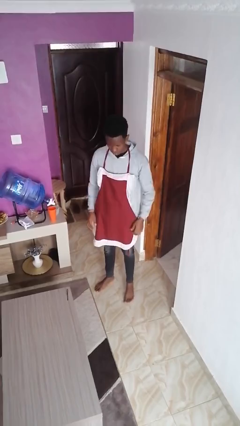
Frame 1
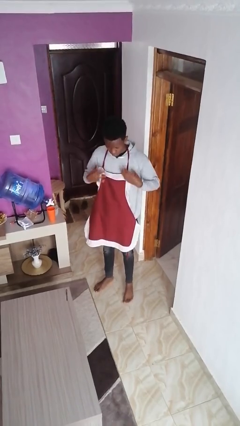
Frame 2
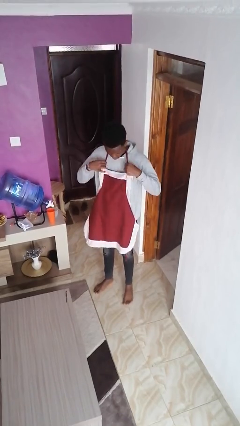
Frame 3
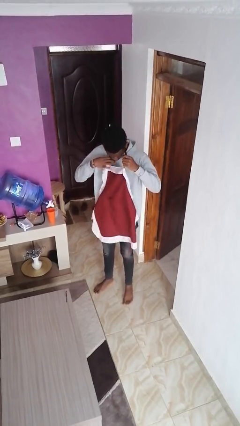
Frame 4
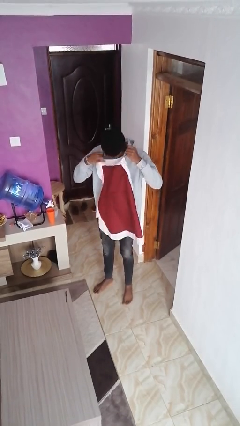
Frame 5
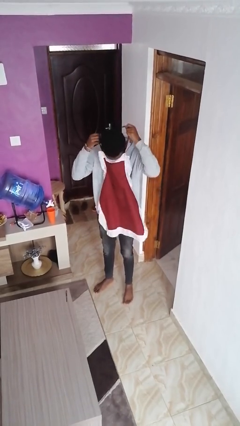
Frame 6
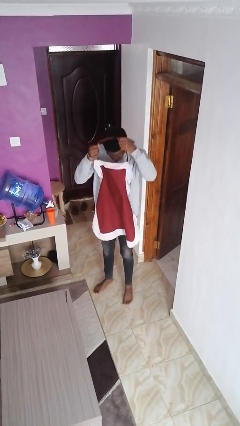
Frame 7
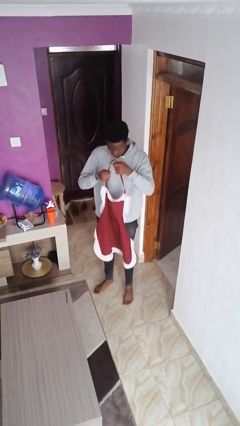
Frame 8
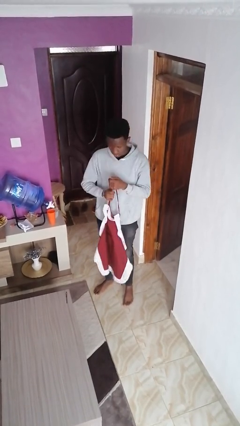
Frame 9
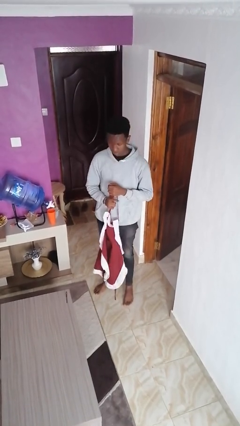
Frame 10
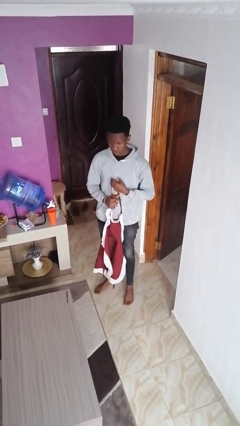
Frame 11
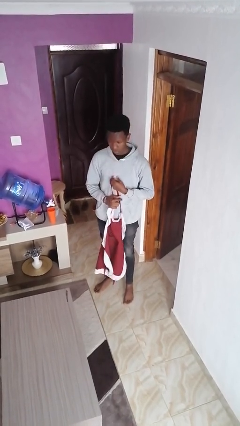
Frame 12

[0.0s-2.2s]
person takes off apron

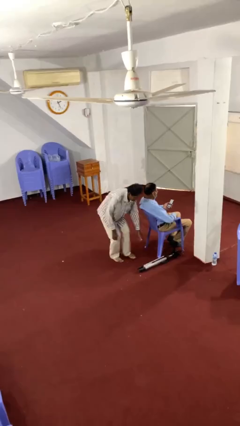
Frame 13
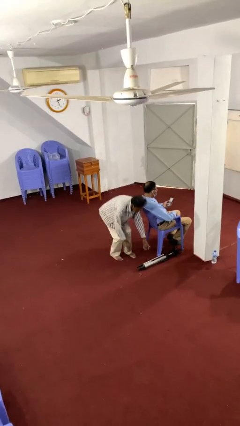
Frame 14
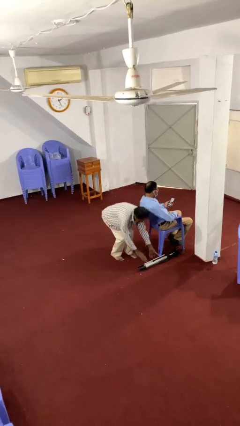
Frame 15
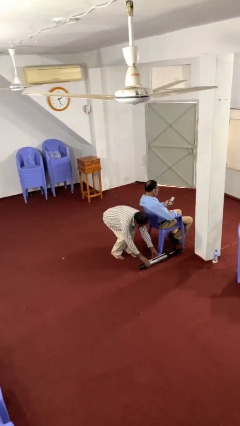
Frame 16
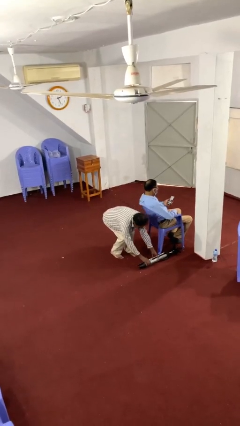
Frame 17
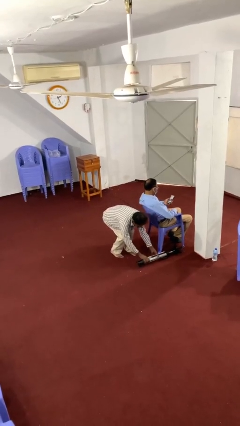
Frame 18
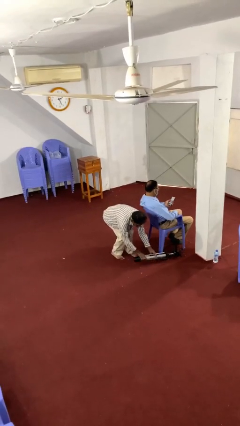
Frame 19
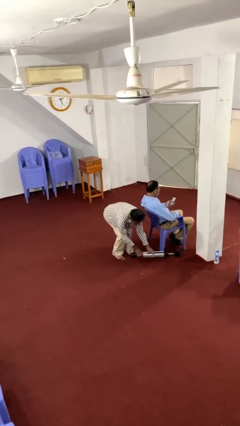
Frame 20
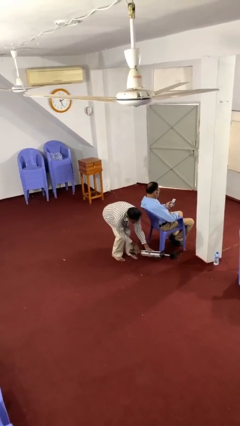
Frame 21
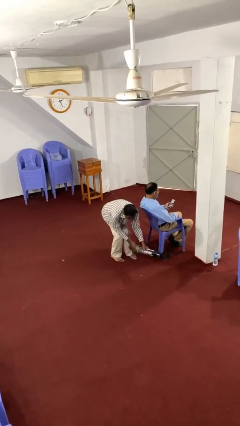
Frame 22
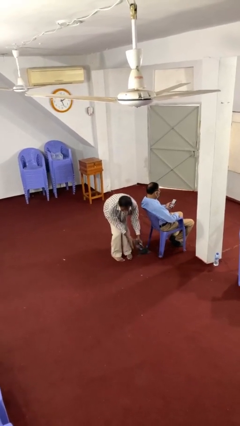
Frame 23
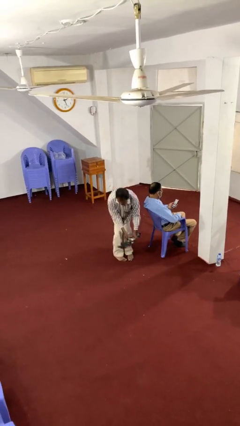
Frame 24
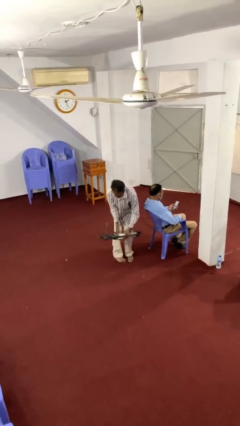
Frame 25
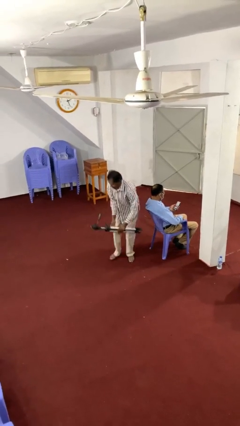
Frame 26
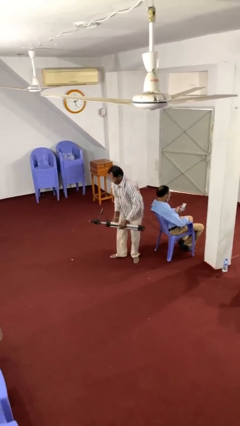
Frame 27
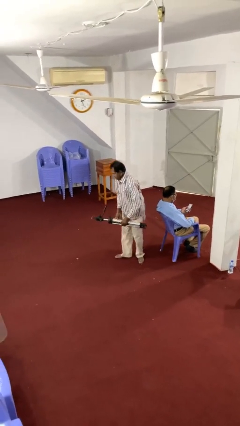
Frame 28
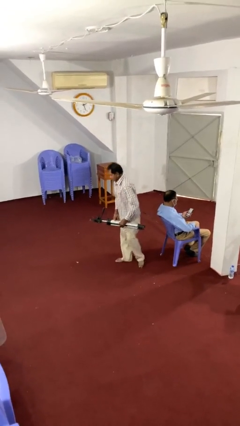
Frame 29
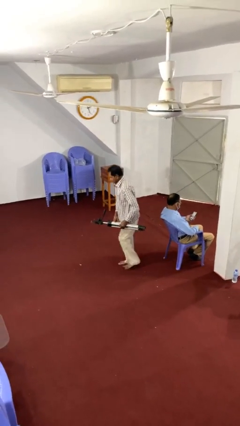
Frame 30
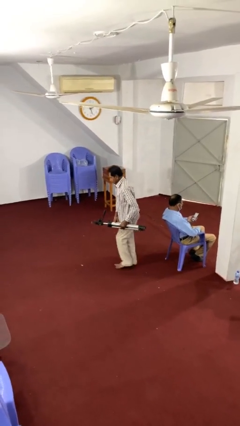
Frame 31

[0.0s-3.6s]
person steals object from person

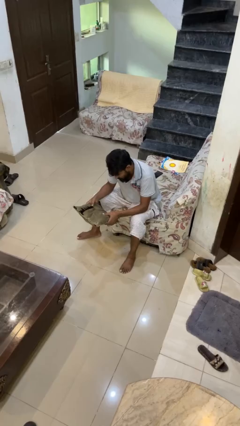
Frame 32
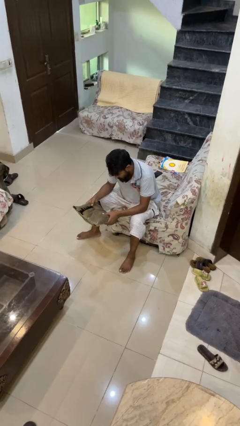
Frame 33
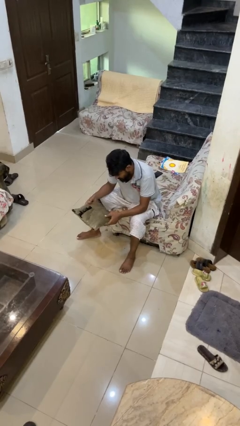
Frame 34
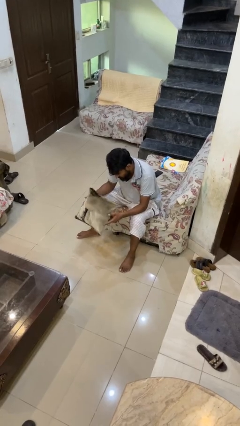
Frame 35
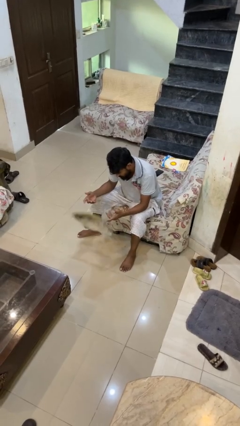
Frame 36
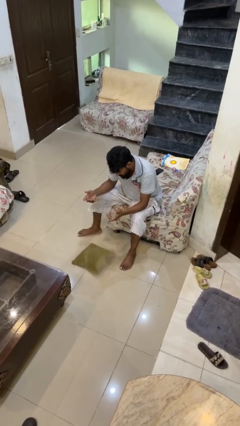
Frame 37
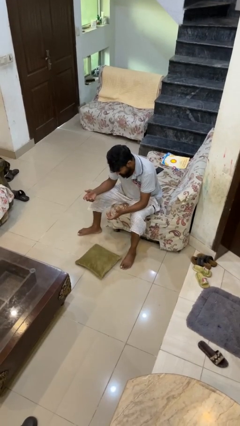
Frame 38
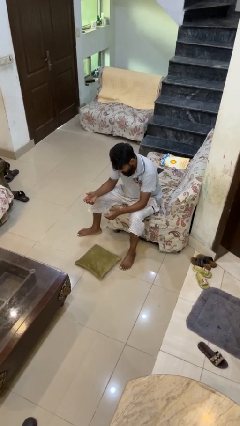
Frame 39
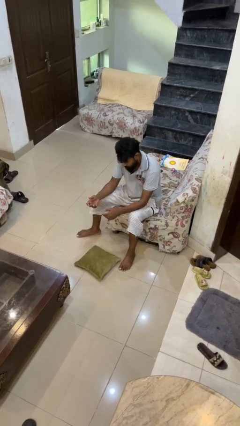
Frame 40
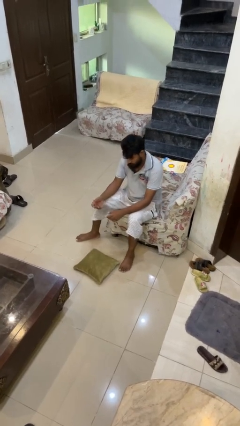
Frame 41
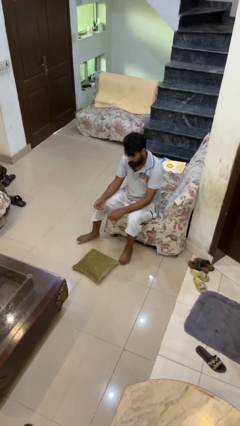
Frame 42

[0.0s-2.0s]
person drops object

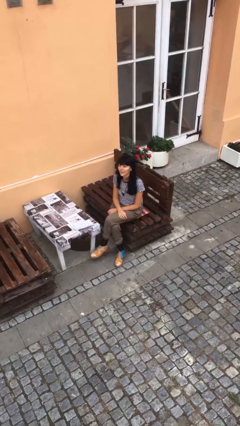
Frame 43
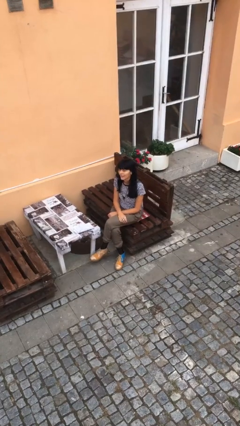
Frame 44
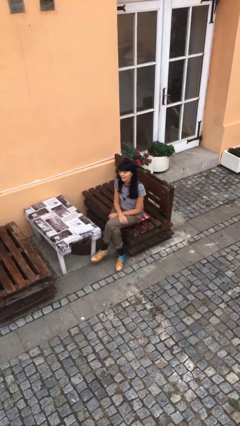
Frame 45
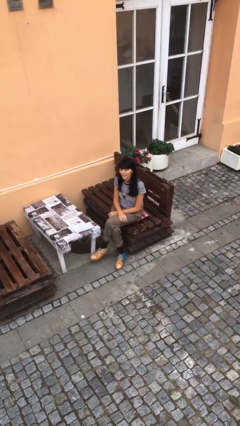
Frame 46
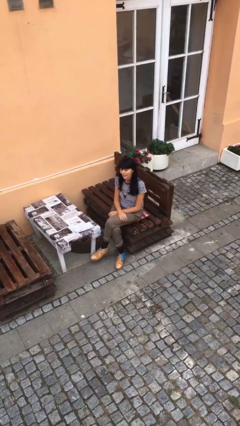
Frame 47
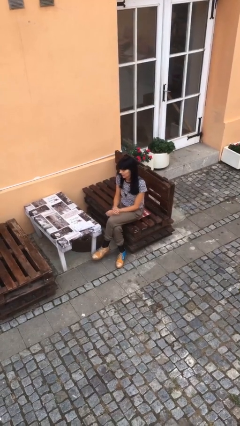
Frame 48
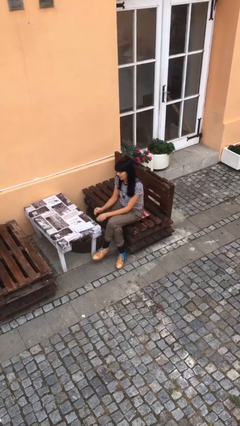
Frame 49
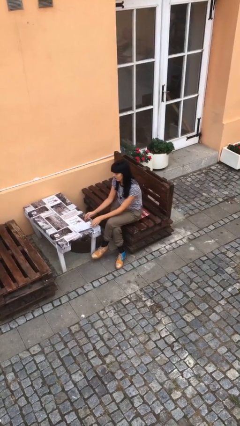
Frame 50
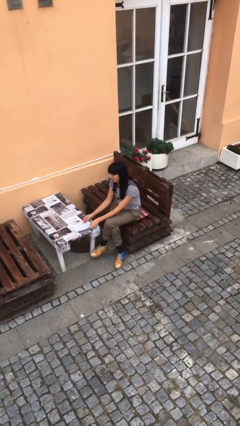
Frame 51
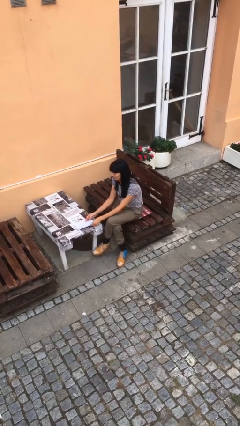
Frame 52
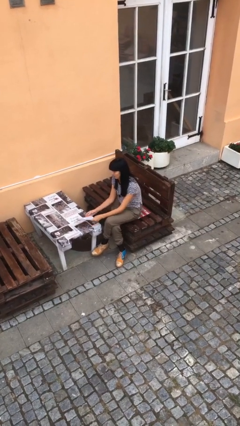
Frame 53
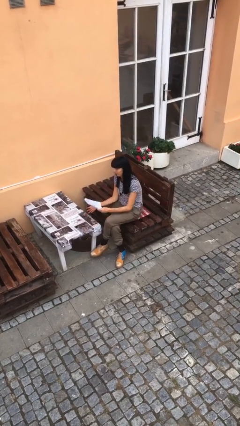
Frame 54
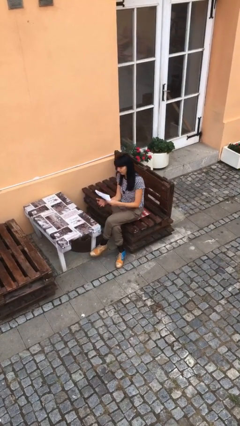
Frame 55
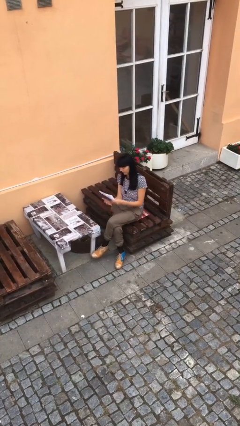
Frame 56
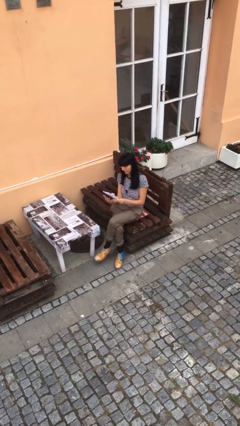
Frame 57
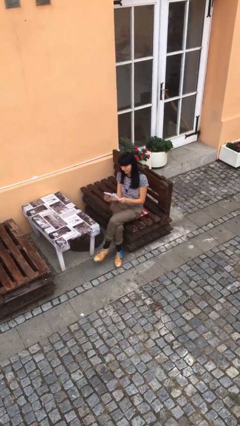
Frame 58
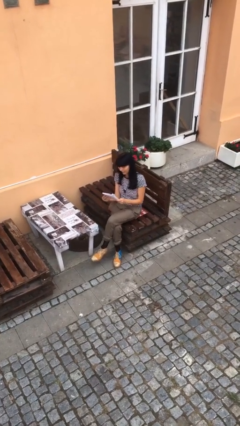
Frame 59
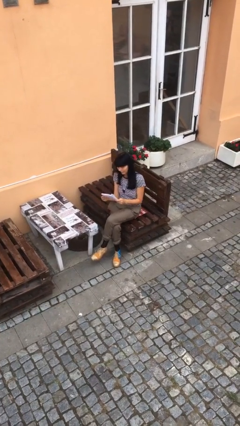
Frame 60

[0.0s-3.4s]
person picks up object from table

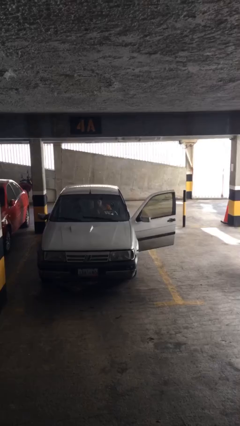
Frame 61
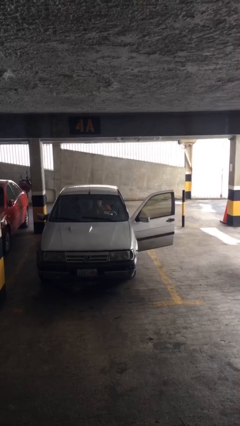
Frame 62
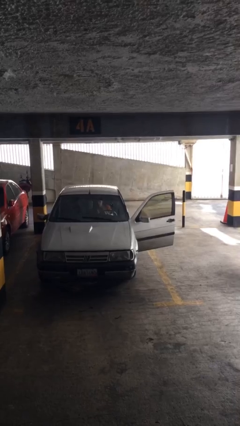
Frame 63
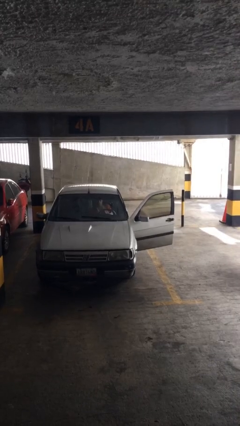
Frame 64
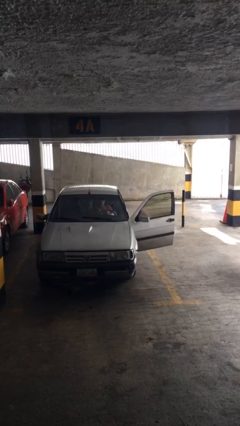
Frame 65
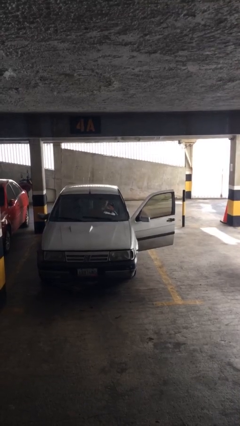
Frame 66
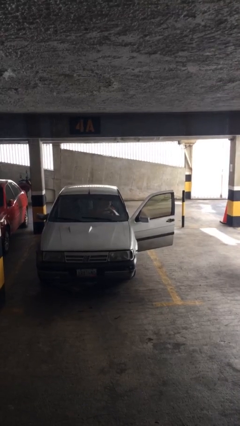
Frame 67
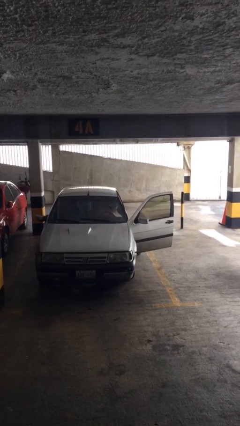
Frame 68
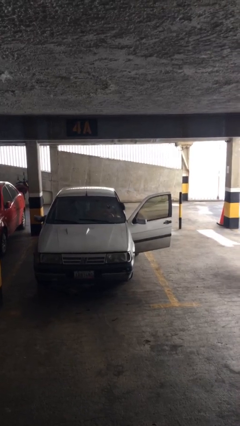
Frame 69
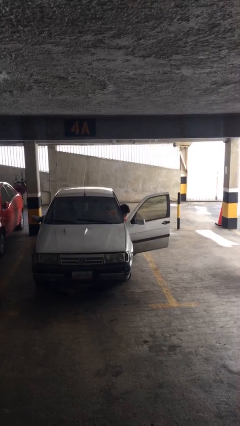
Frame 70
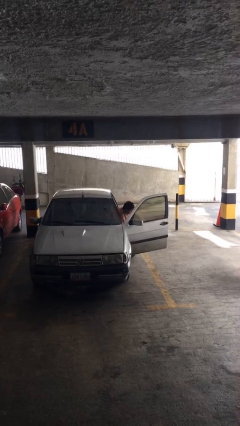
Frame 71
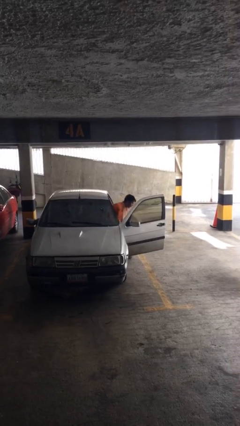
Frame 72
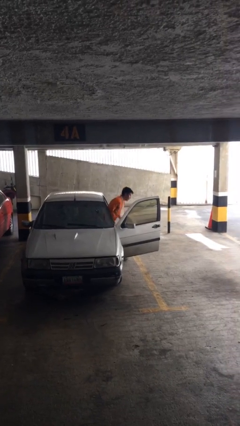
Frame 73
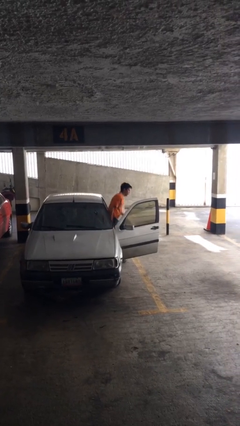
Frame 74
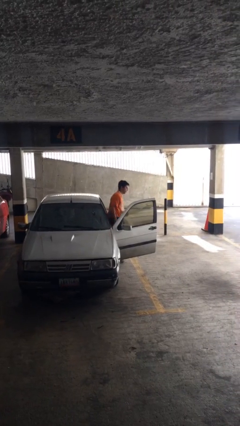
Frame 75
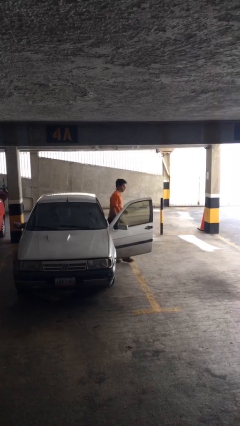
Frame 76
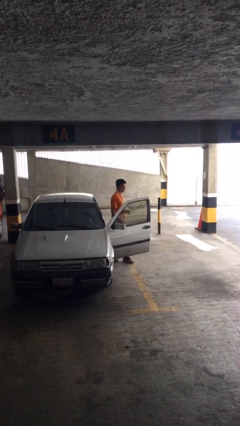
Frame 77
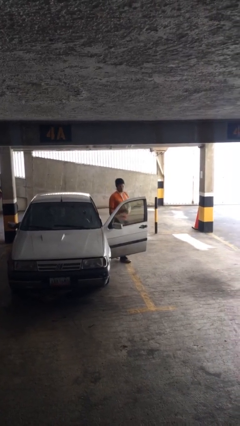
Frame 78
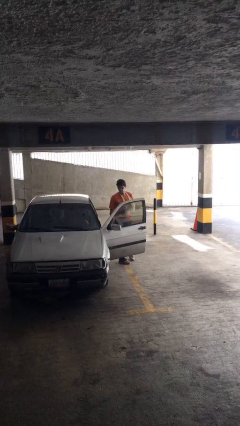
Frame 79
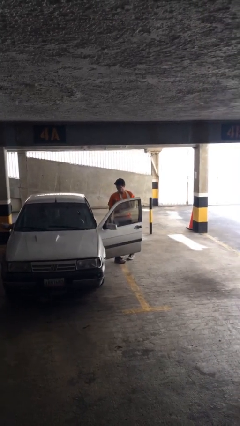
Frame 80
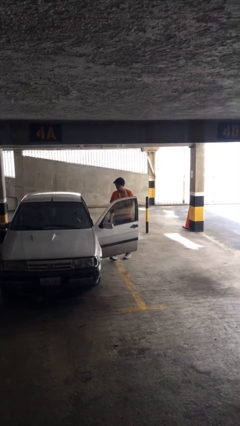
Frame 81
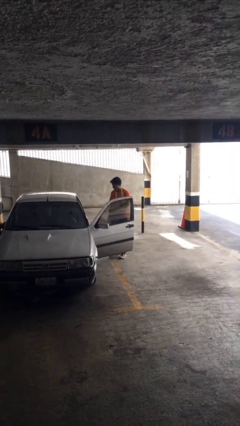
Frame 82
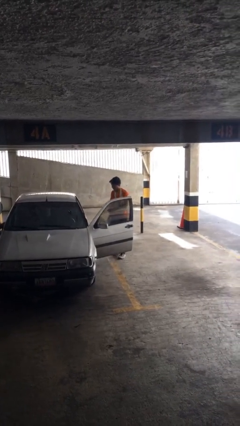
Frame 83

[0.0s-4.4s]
person exits car

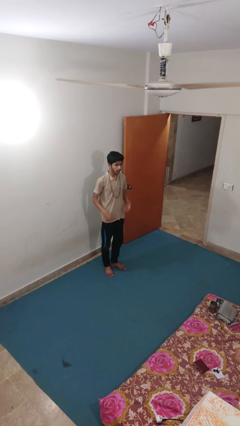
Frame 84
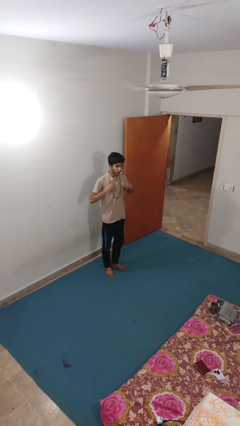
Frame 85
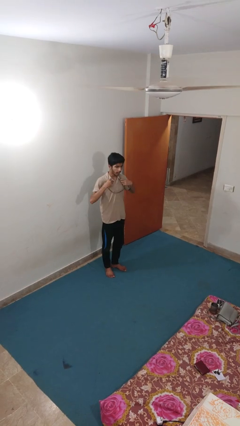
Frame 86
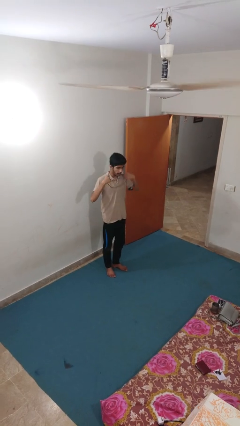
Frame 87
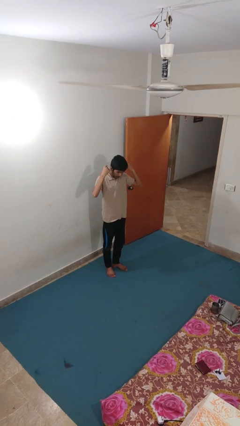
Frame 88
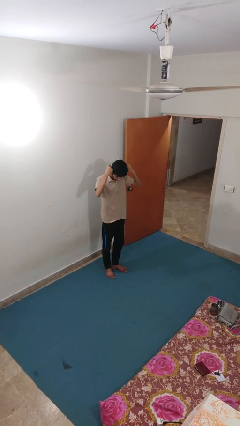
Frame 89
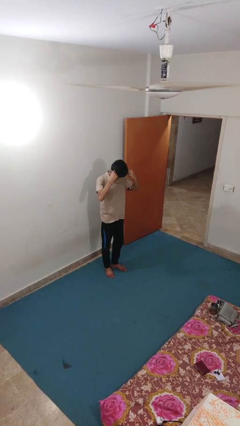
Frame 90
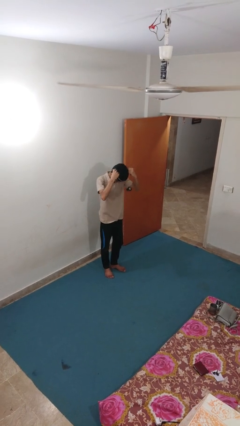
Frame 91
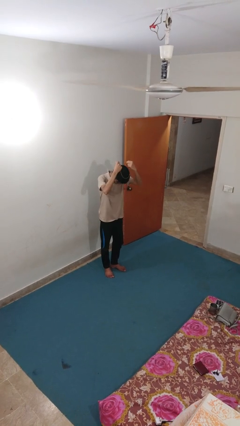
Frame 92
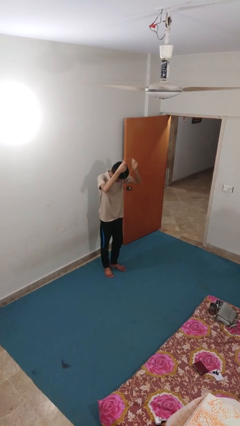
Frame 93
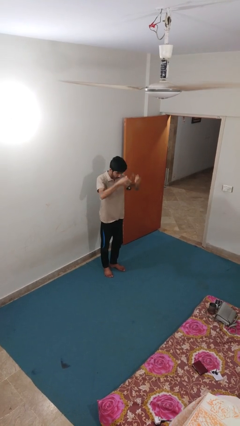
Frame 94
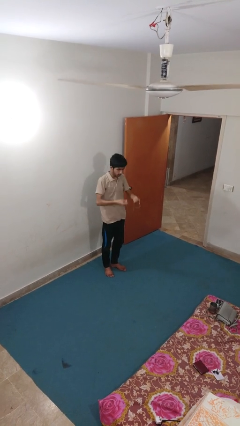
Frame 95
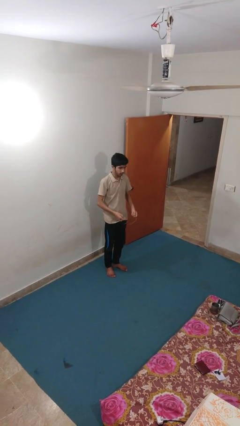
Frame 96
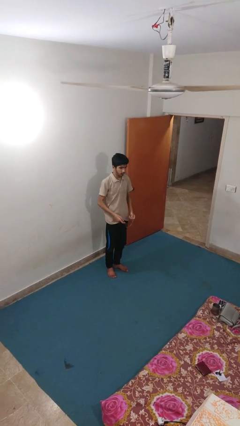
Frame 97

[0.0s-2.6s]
person takes off necklace
